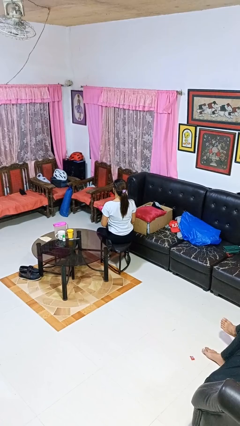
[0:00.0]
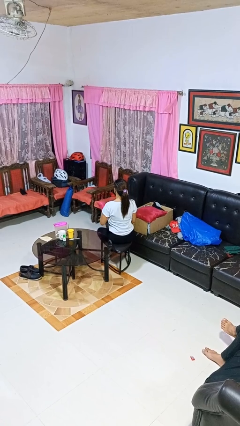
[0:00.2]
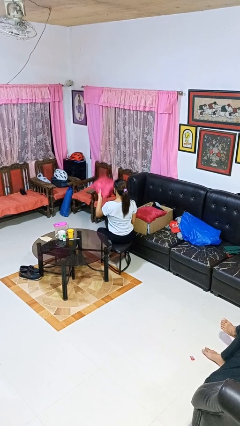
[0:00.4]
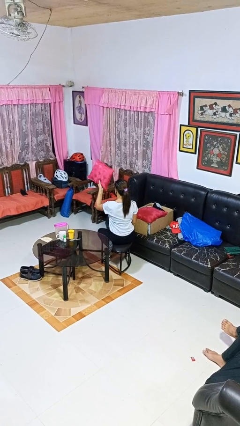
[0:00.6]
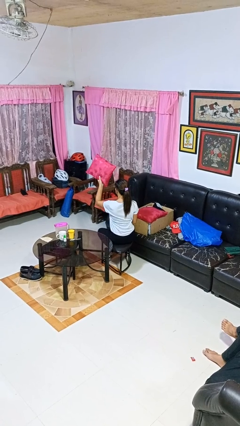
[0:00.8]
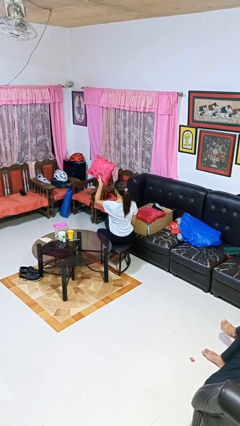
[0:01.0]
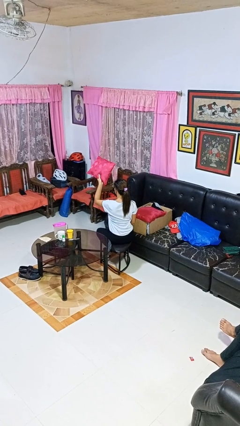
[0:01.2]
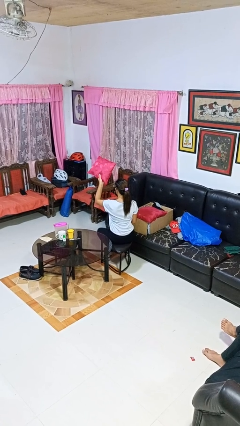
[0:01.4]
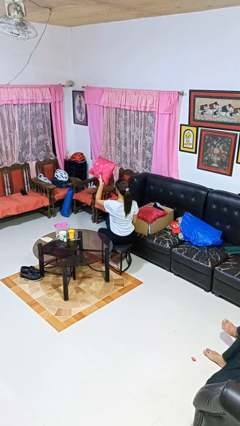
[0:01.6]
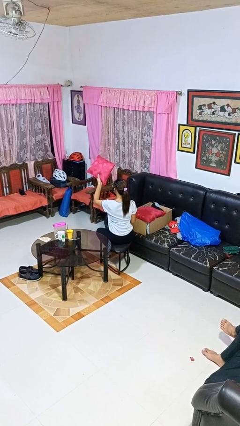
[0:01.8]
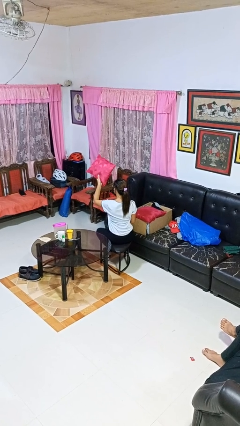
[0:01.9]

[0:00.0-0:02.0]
person holds object above head

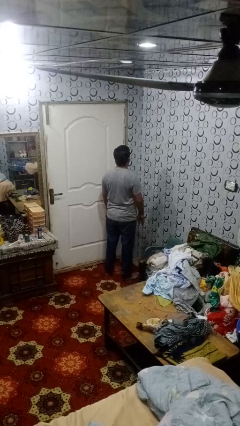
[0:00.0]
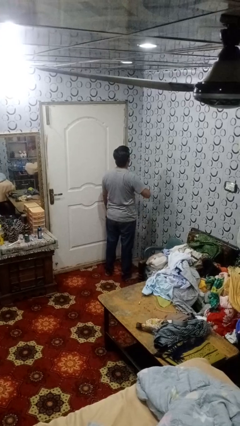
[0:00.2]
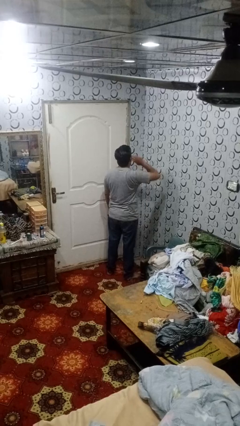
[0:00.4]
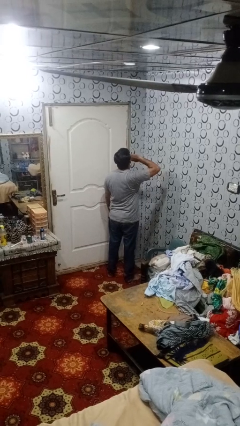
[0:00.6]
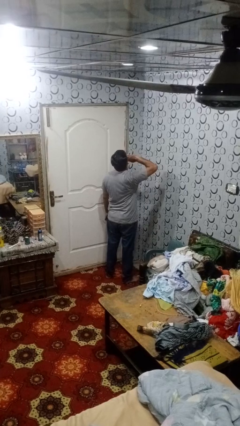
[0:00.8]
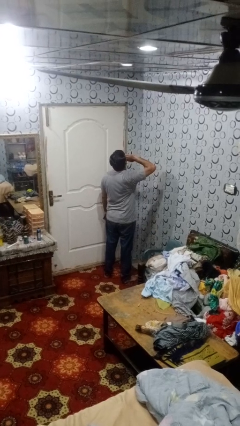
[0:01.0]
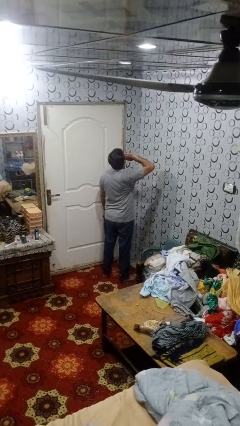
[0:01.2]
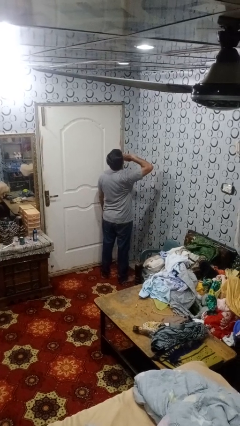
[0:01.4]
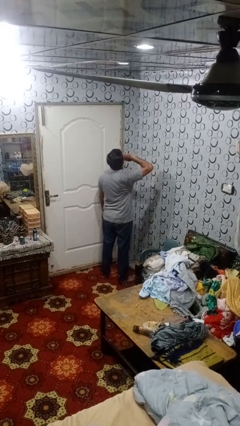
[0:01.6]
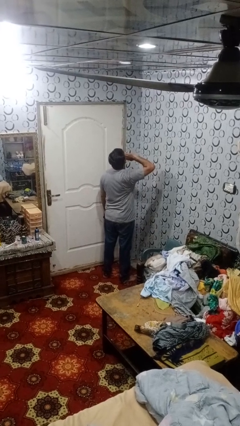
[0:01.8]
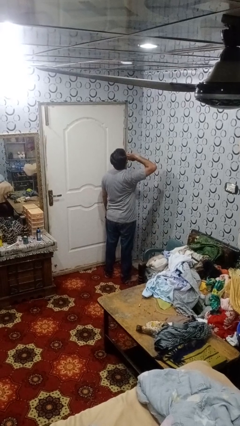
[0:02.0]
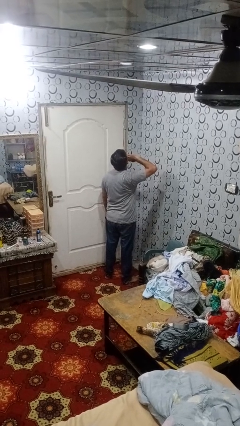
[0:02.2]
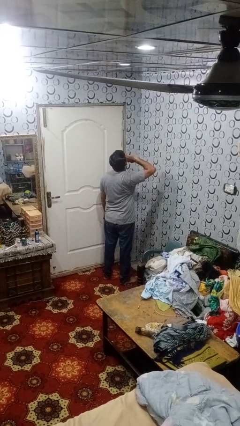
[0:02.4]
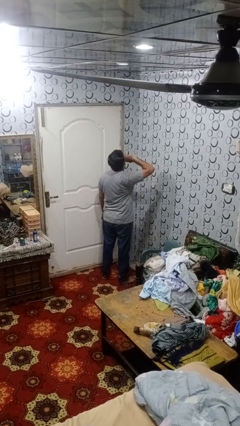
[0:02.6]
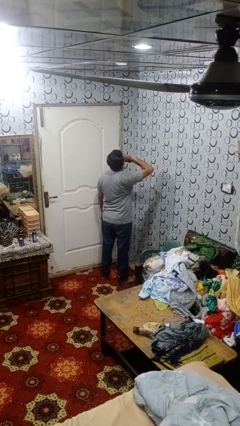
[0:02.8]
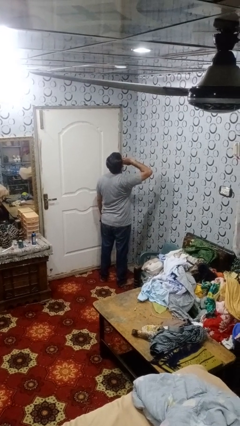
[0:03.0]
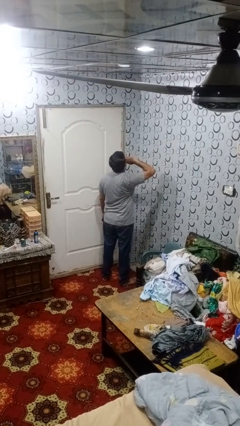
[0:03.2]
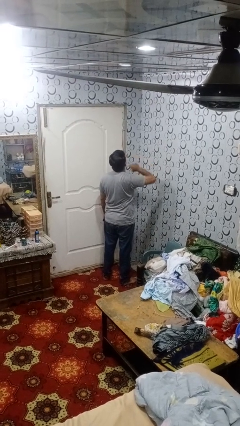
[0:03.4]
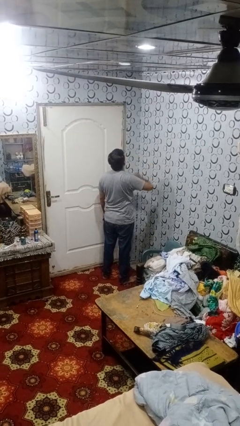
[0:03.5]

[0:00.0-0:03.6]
person yawns

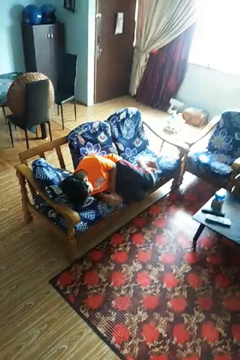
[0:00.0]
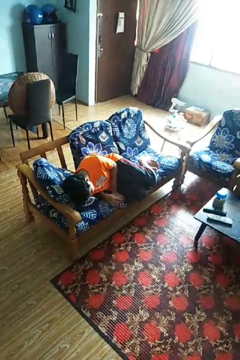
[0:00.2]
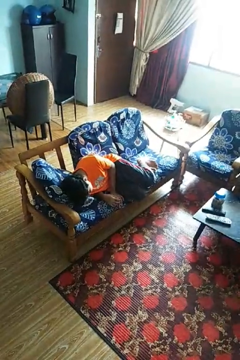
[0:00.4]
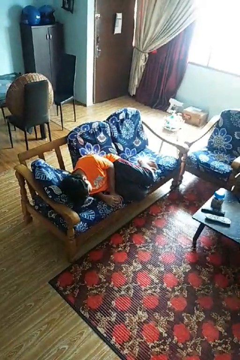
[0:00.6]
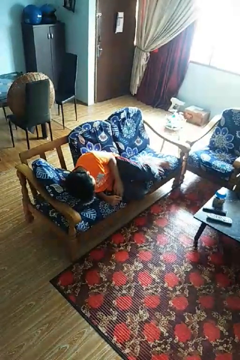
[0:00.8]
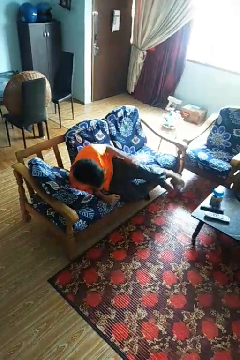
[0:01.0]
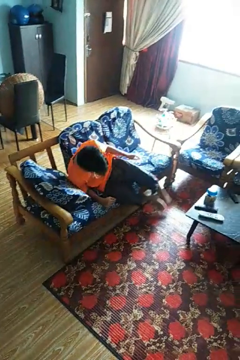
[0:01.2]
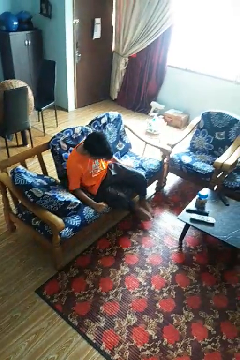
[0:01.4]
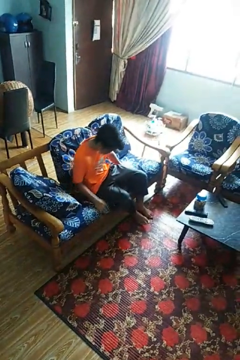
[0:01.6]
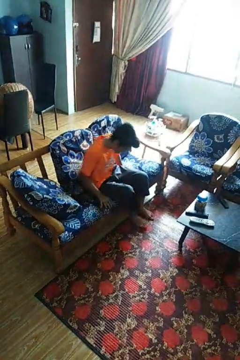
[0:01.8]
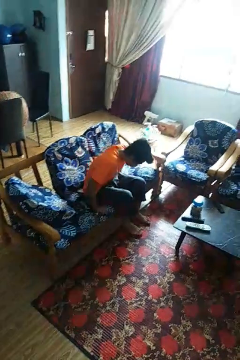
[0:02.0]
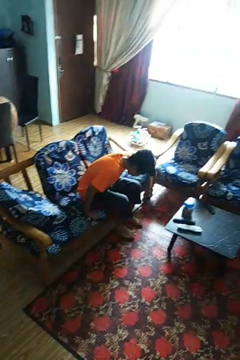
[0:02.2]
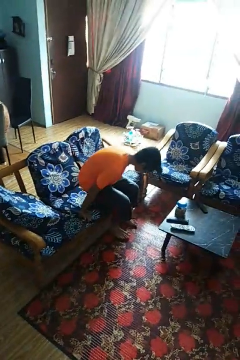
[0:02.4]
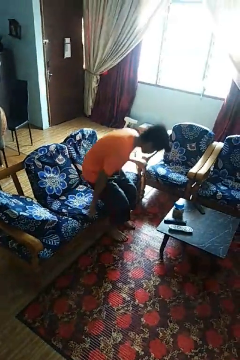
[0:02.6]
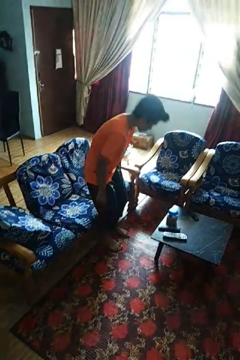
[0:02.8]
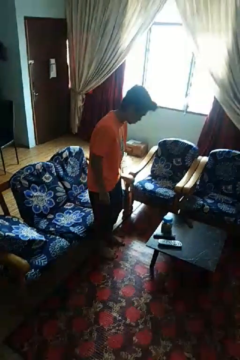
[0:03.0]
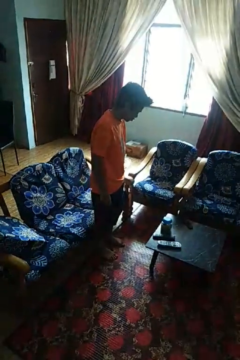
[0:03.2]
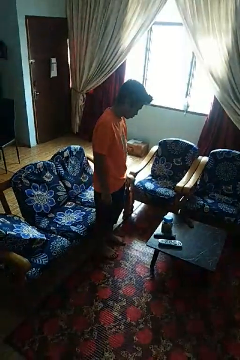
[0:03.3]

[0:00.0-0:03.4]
person stands up

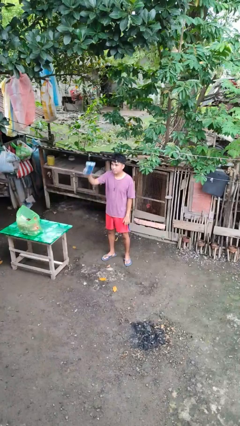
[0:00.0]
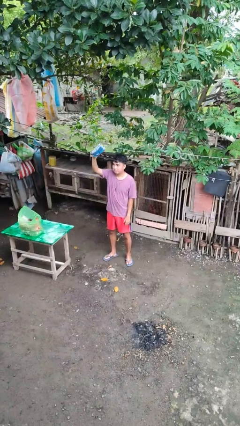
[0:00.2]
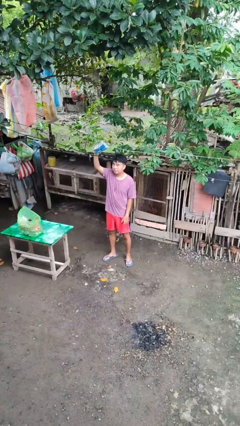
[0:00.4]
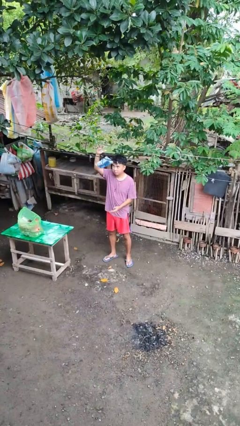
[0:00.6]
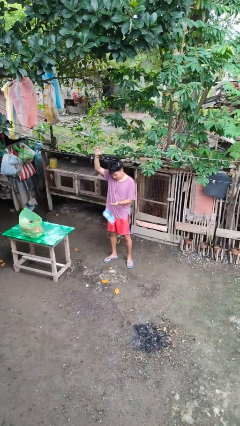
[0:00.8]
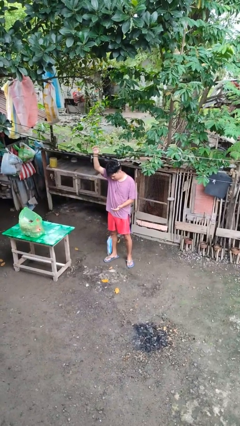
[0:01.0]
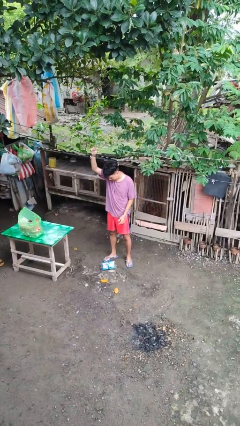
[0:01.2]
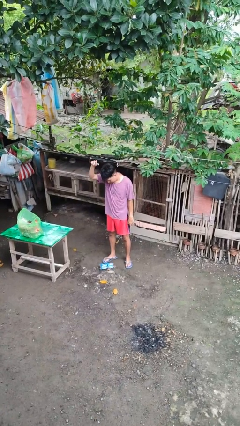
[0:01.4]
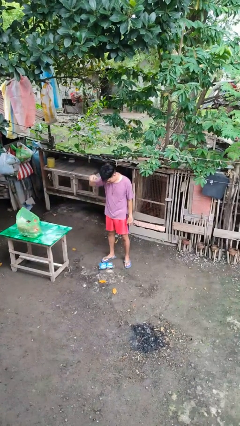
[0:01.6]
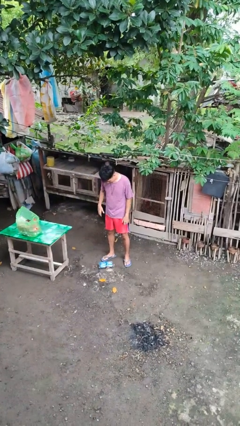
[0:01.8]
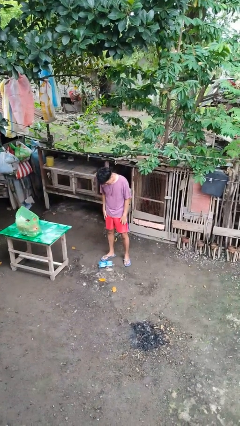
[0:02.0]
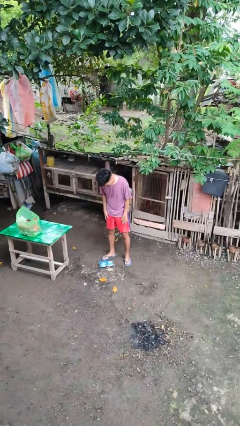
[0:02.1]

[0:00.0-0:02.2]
person drops object

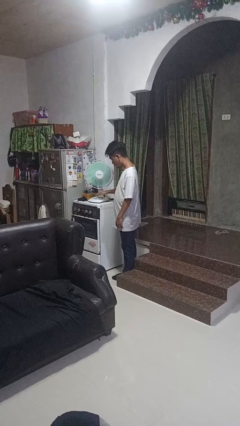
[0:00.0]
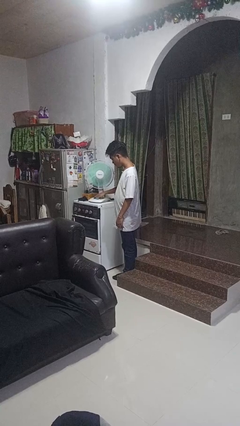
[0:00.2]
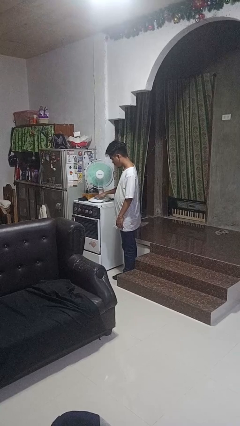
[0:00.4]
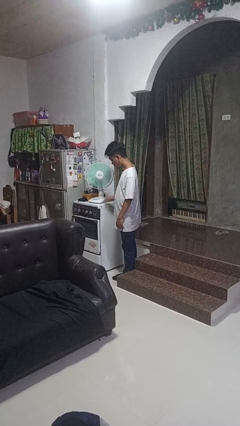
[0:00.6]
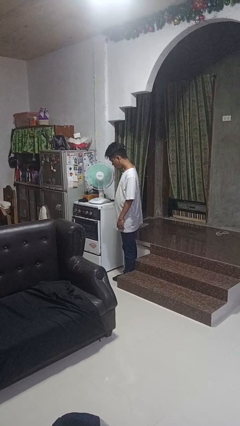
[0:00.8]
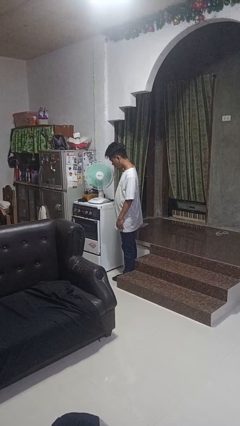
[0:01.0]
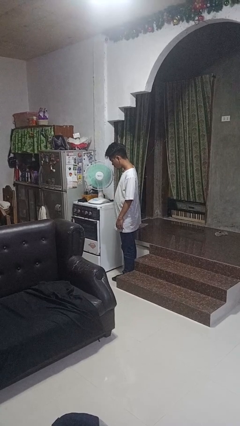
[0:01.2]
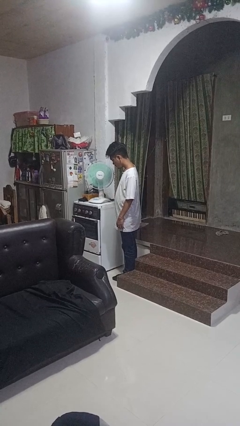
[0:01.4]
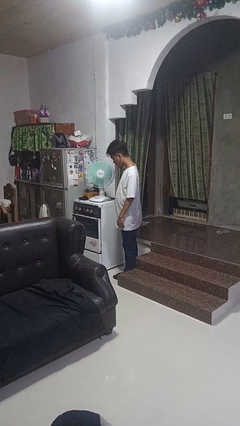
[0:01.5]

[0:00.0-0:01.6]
person turns off fan

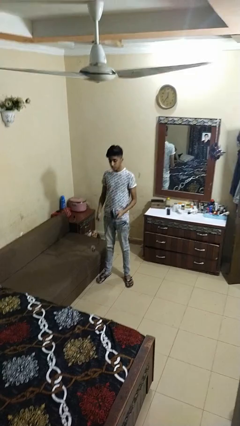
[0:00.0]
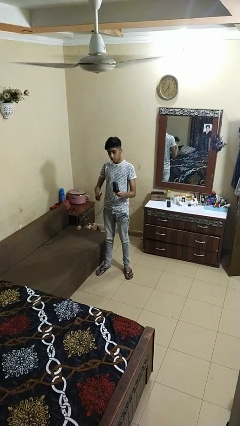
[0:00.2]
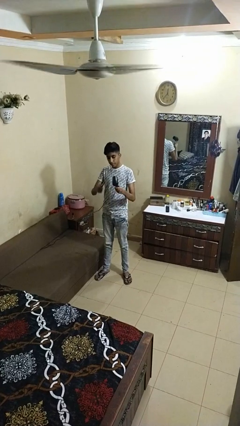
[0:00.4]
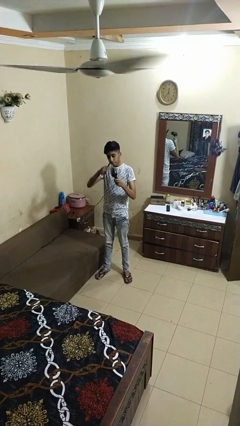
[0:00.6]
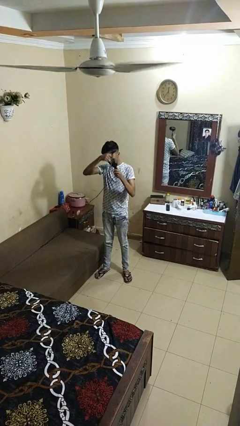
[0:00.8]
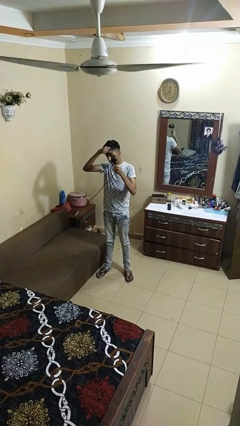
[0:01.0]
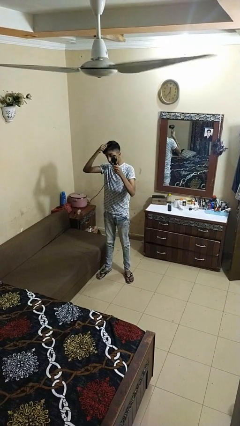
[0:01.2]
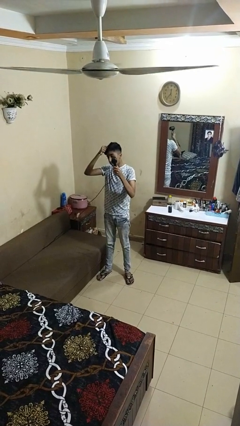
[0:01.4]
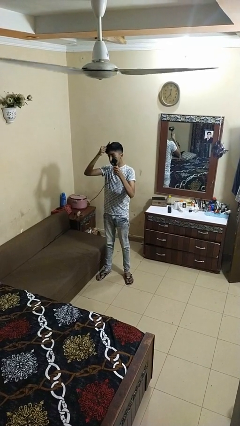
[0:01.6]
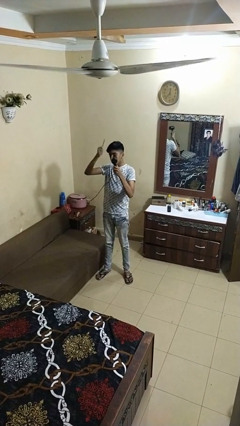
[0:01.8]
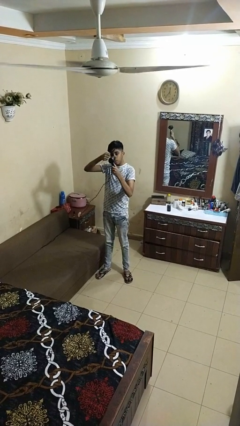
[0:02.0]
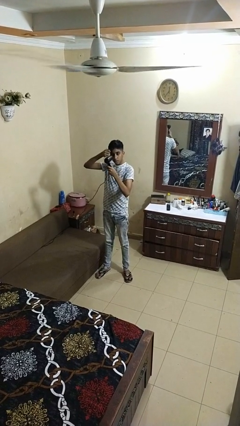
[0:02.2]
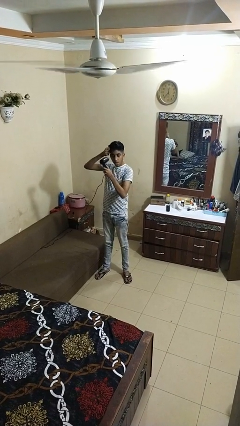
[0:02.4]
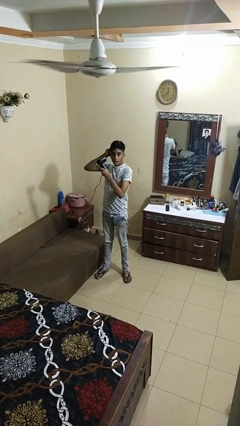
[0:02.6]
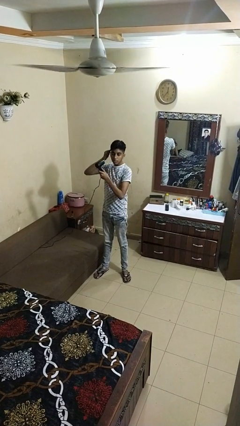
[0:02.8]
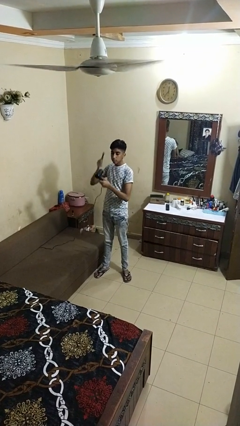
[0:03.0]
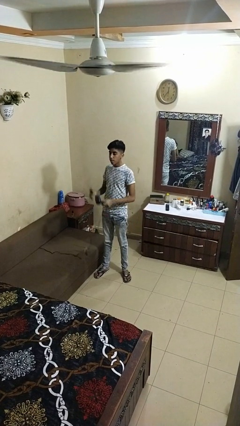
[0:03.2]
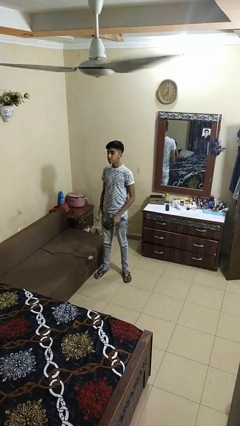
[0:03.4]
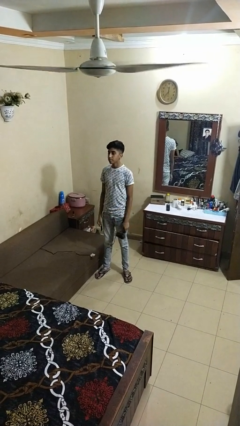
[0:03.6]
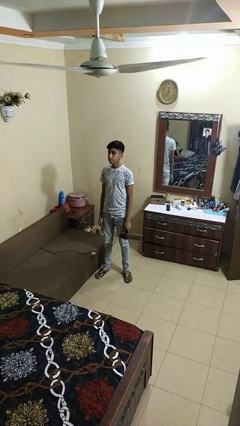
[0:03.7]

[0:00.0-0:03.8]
person dries hair with hairdryer

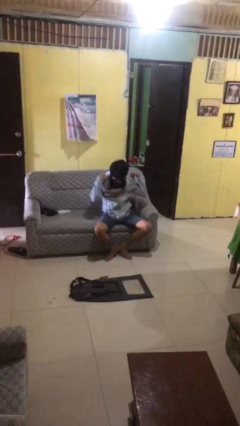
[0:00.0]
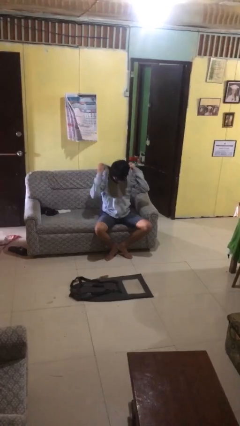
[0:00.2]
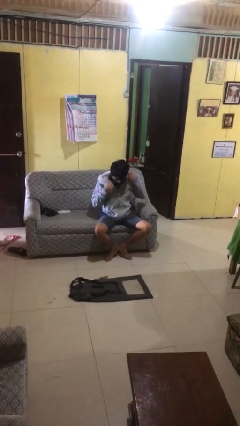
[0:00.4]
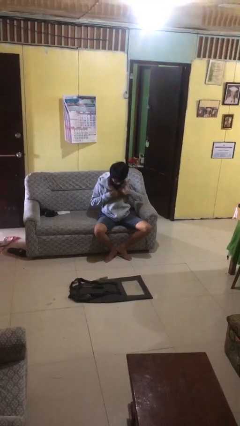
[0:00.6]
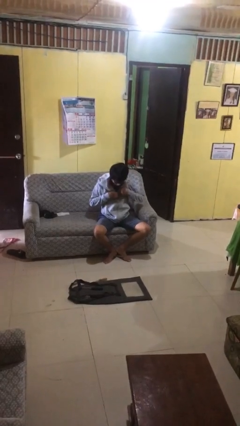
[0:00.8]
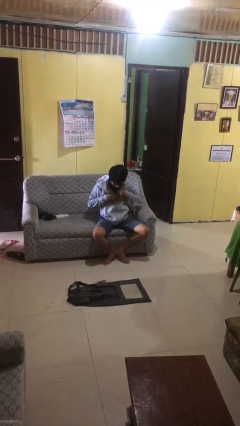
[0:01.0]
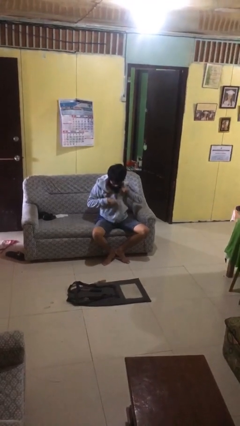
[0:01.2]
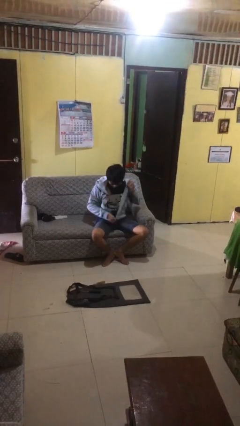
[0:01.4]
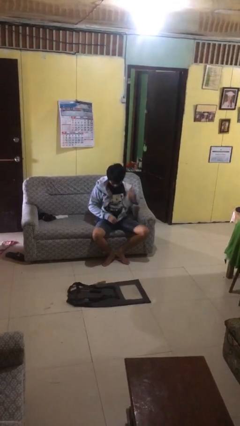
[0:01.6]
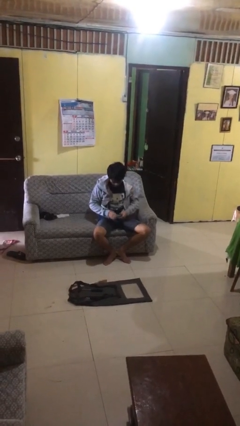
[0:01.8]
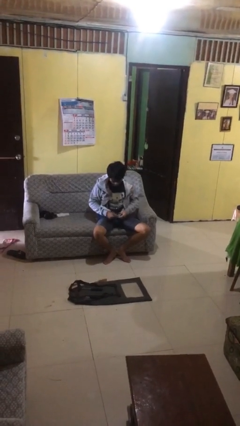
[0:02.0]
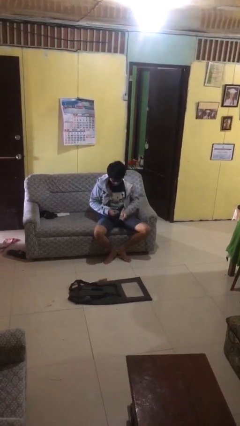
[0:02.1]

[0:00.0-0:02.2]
person unzips jacket
